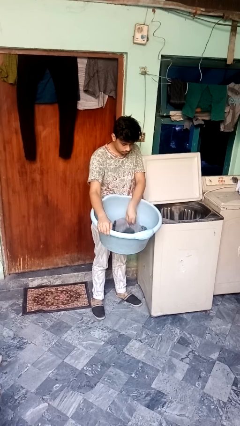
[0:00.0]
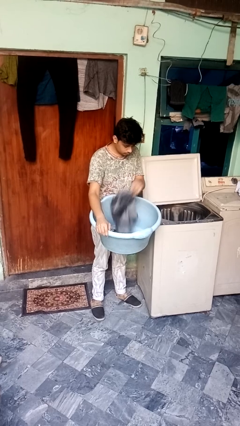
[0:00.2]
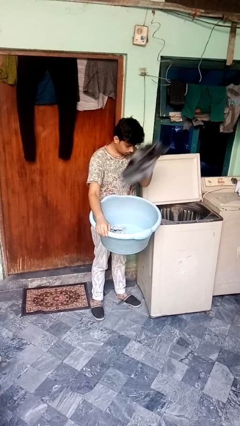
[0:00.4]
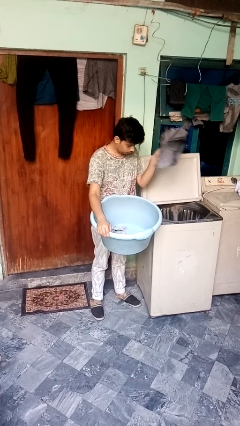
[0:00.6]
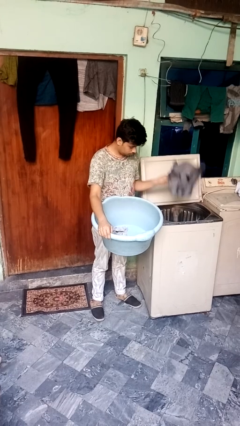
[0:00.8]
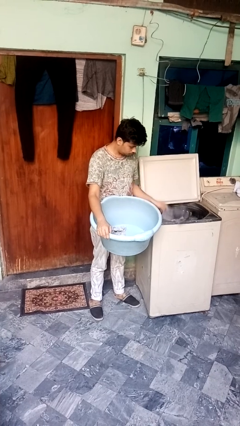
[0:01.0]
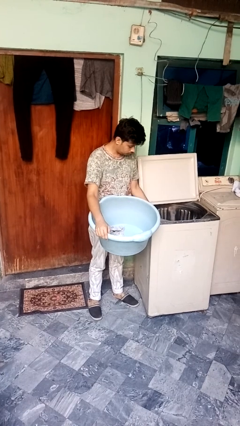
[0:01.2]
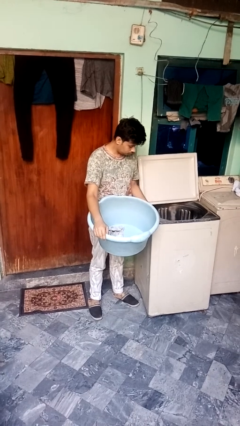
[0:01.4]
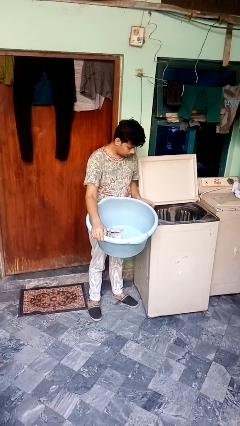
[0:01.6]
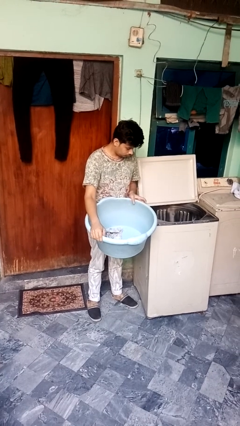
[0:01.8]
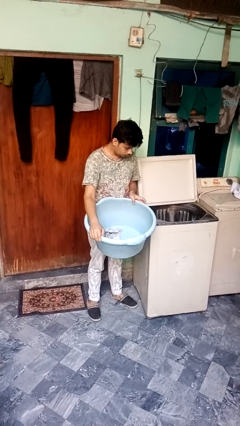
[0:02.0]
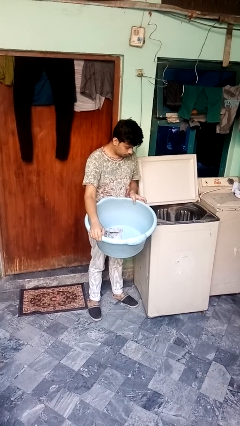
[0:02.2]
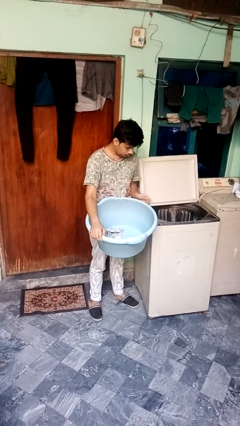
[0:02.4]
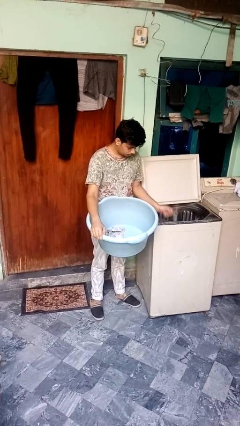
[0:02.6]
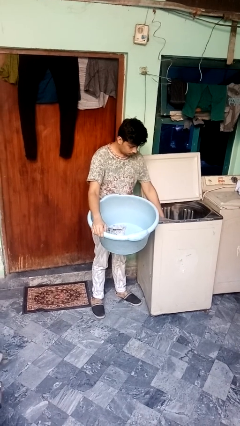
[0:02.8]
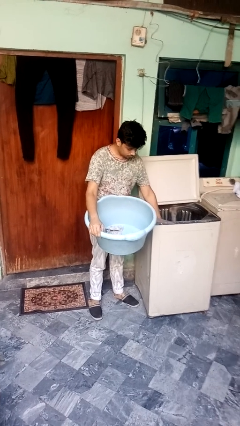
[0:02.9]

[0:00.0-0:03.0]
person unloads clotheswasher

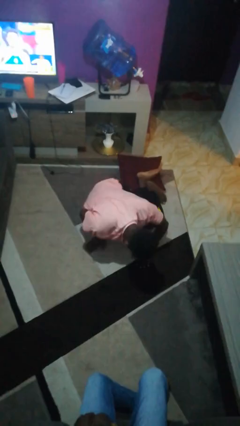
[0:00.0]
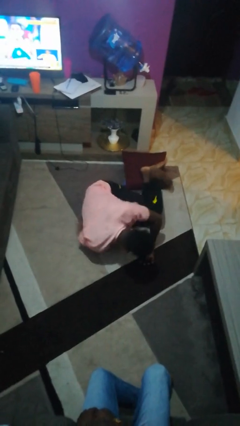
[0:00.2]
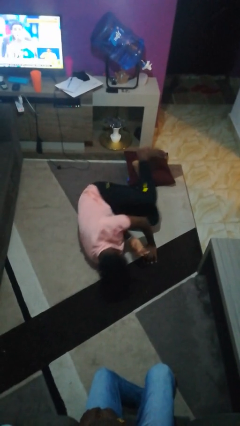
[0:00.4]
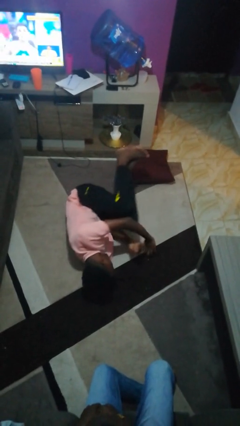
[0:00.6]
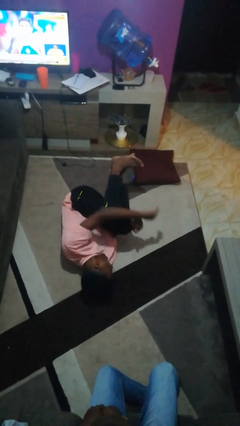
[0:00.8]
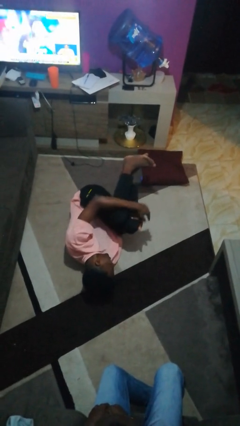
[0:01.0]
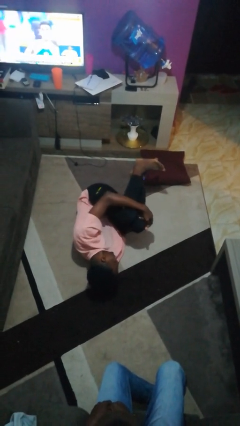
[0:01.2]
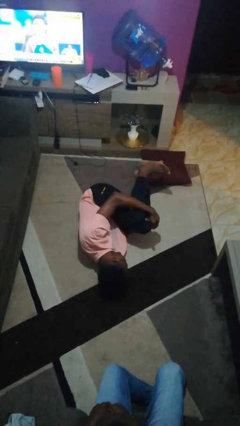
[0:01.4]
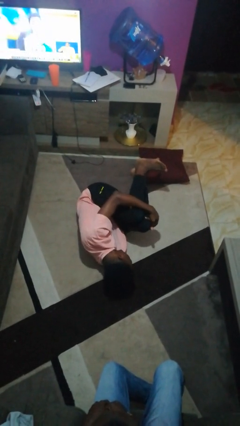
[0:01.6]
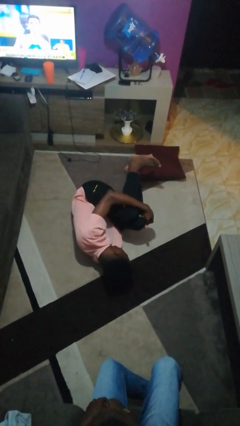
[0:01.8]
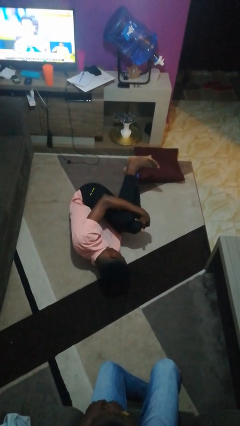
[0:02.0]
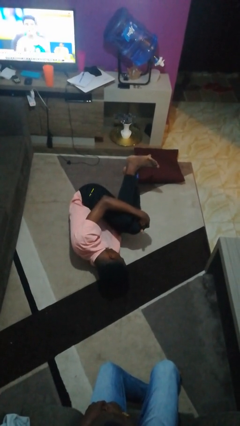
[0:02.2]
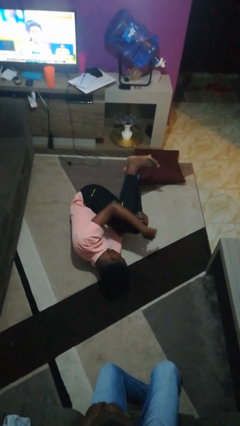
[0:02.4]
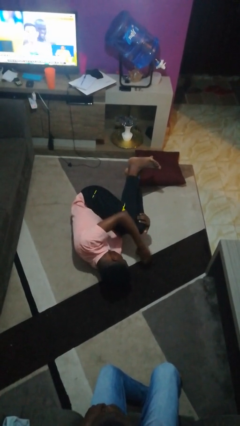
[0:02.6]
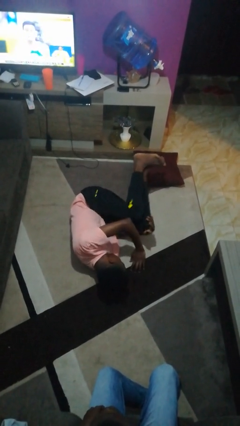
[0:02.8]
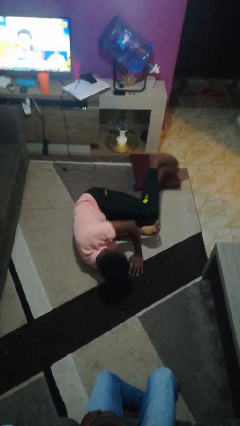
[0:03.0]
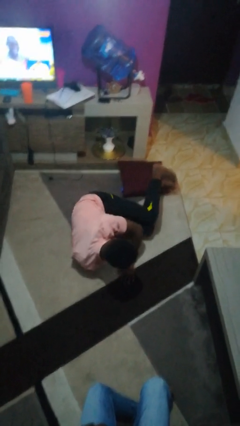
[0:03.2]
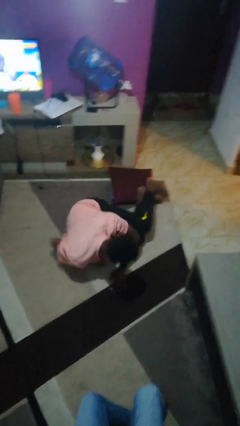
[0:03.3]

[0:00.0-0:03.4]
person lies down on floor

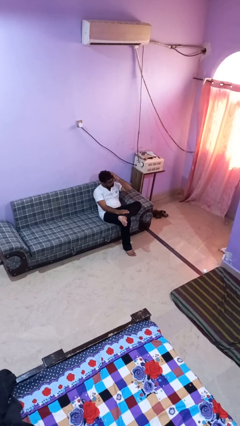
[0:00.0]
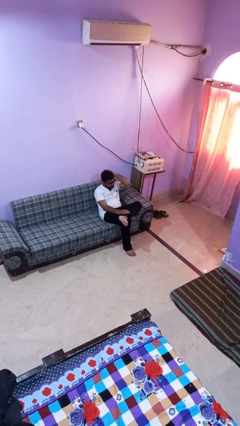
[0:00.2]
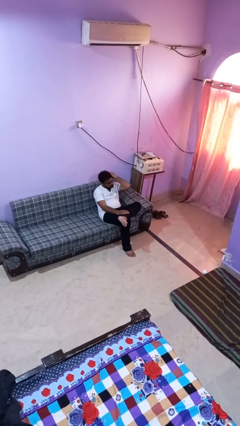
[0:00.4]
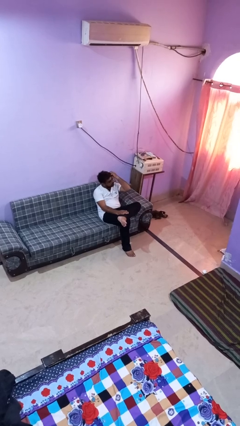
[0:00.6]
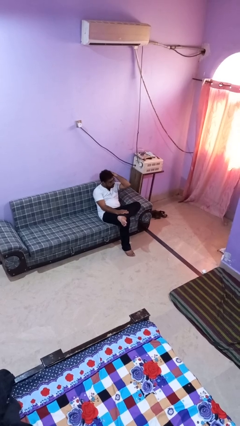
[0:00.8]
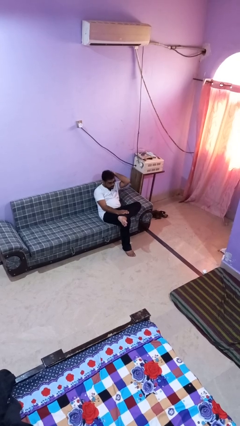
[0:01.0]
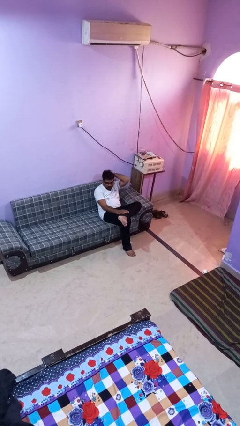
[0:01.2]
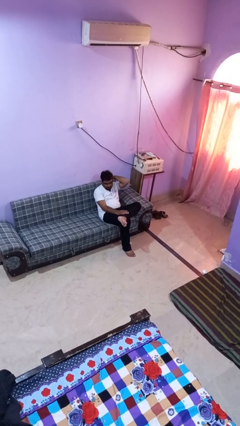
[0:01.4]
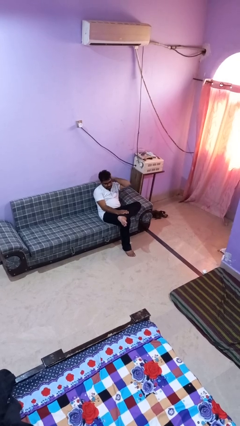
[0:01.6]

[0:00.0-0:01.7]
person strokes hair

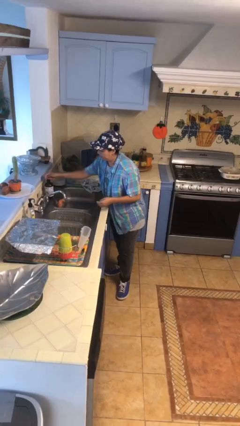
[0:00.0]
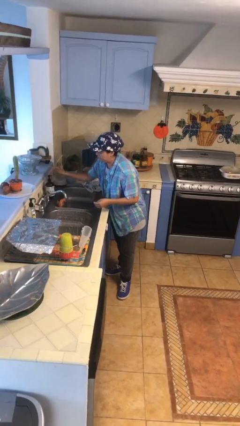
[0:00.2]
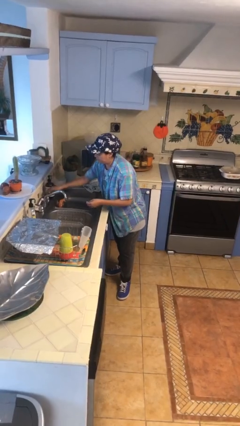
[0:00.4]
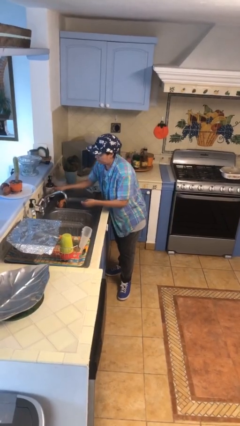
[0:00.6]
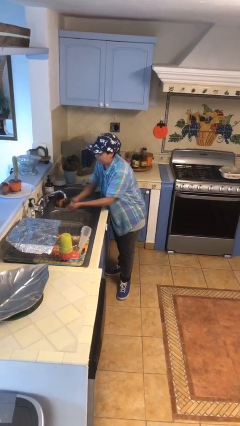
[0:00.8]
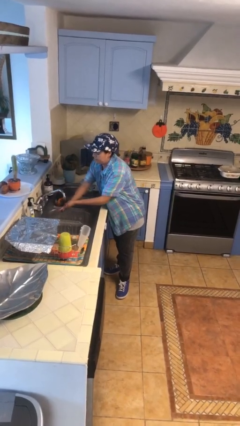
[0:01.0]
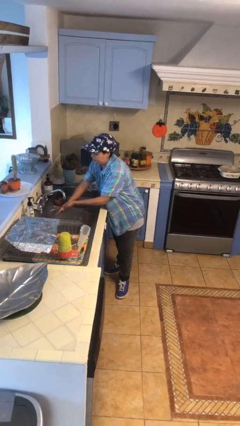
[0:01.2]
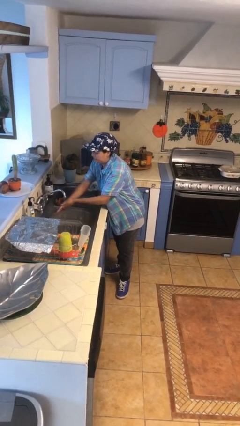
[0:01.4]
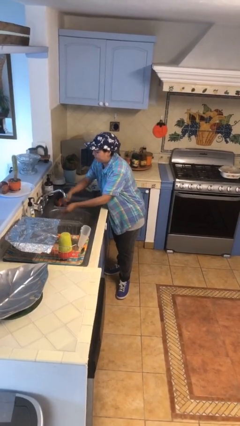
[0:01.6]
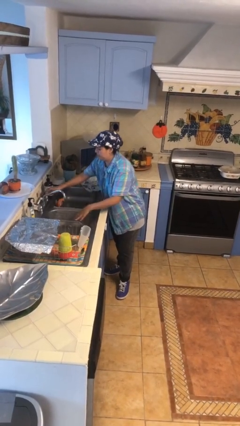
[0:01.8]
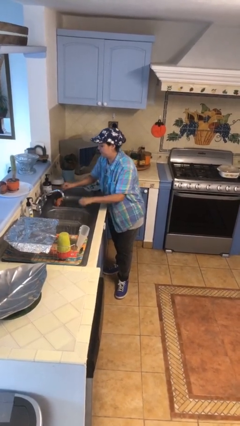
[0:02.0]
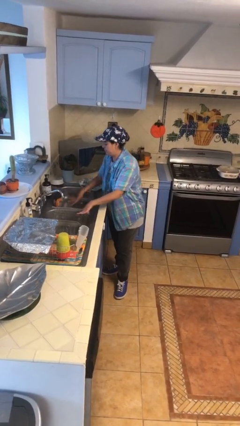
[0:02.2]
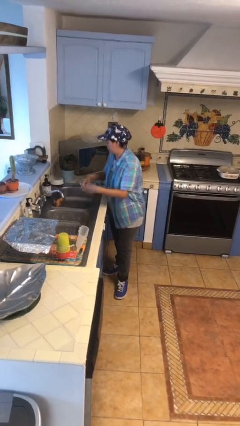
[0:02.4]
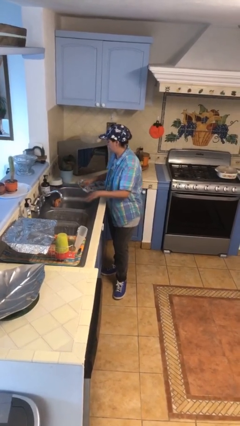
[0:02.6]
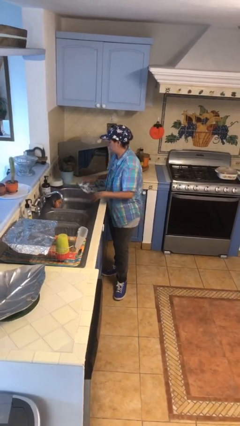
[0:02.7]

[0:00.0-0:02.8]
person washes hands

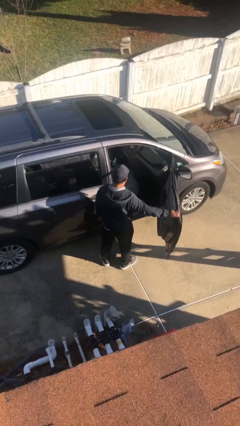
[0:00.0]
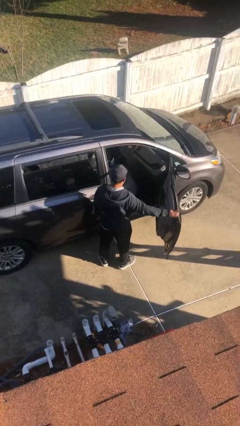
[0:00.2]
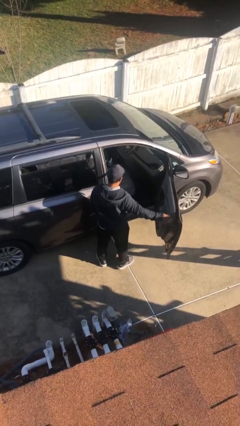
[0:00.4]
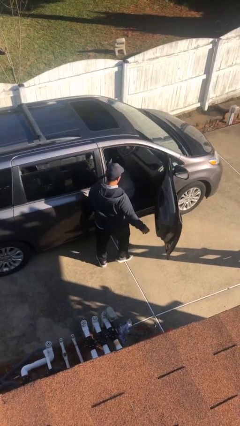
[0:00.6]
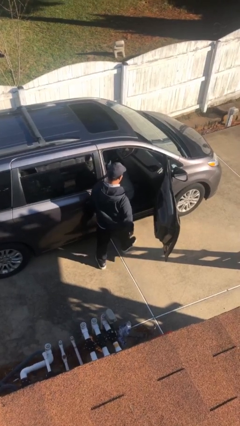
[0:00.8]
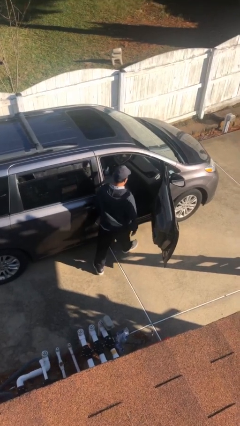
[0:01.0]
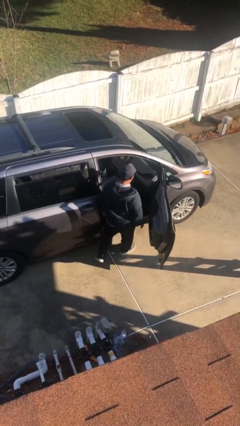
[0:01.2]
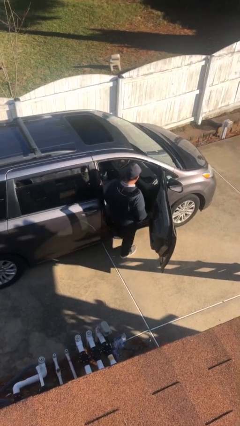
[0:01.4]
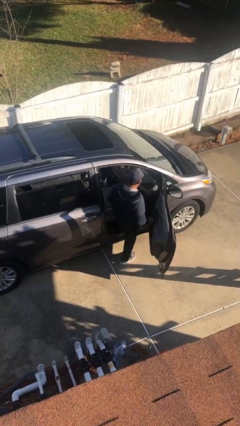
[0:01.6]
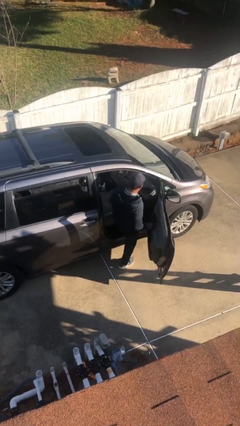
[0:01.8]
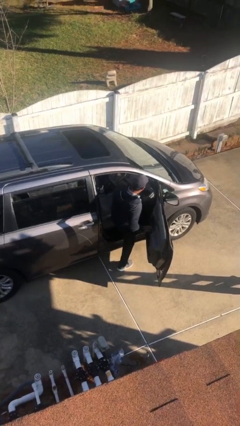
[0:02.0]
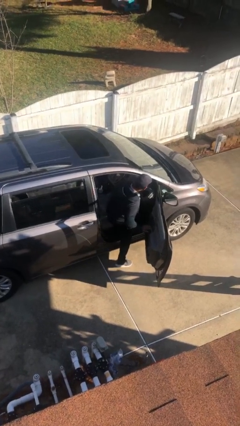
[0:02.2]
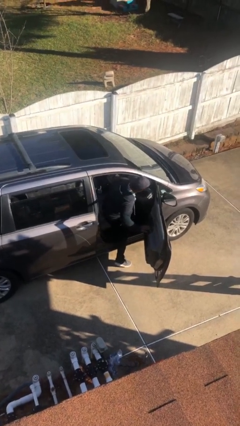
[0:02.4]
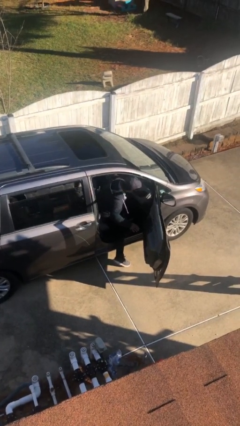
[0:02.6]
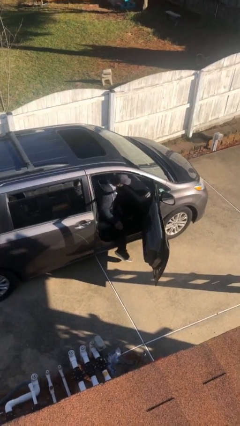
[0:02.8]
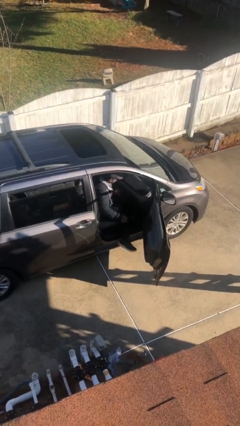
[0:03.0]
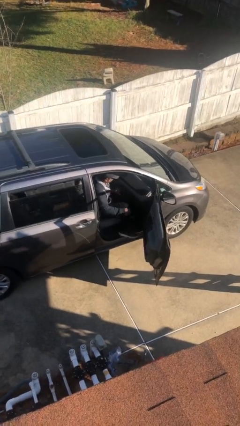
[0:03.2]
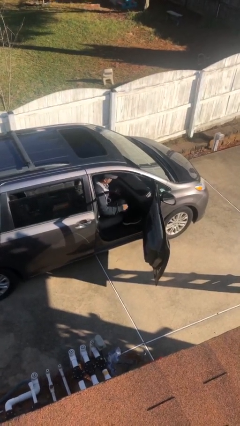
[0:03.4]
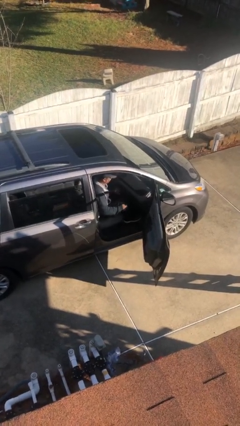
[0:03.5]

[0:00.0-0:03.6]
person enters car

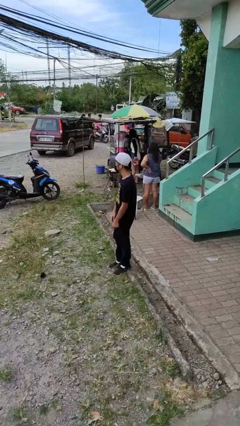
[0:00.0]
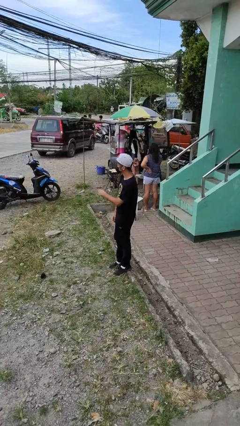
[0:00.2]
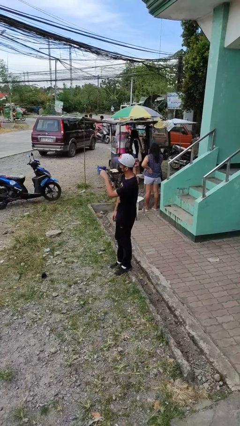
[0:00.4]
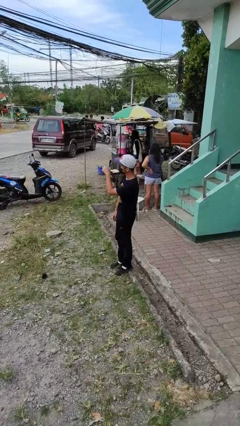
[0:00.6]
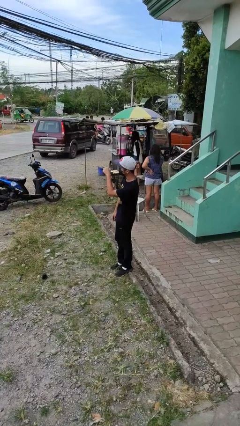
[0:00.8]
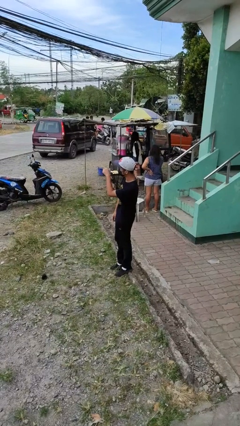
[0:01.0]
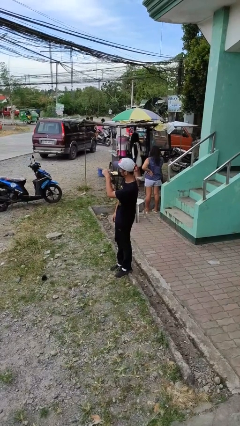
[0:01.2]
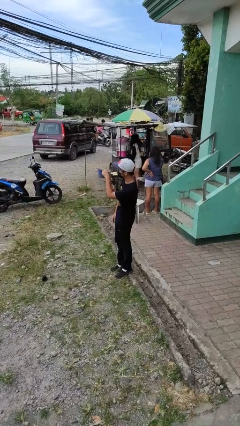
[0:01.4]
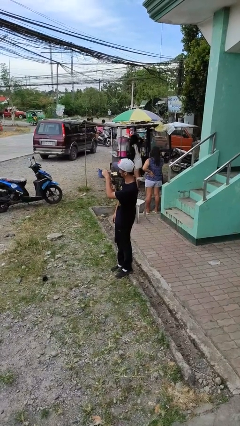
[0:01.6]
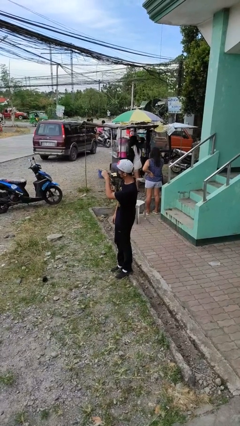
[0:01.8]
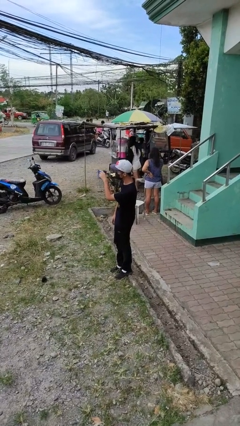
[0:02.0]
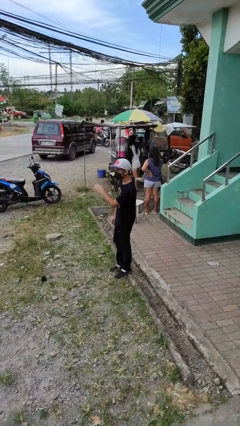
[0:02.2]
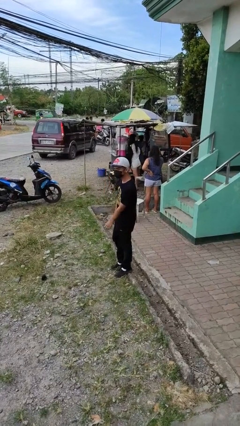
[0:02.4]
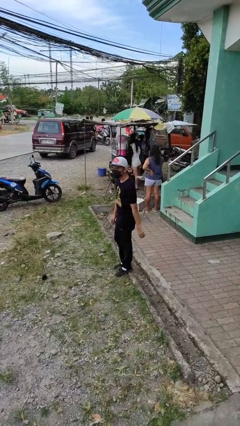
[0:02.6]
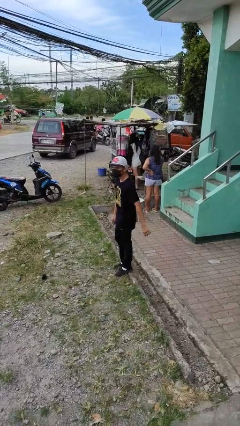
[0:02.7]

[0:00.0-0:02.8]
person points at person

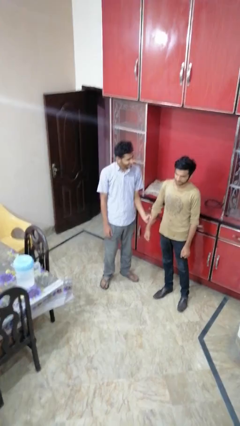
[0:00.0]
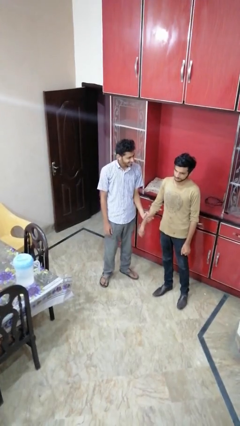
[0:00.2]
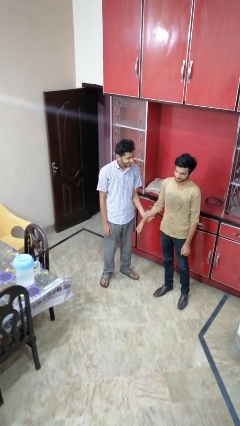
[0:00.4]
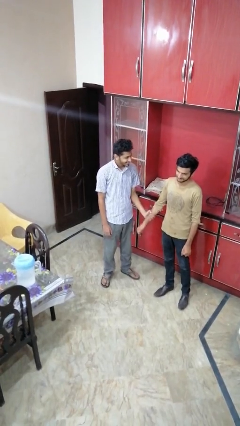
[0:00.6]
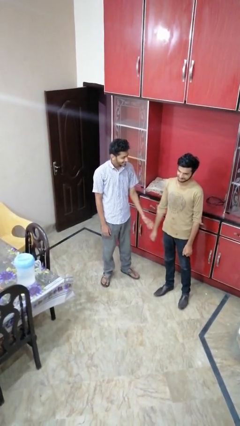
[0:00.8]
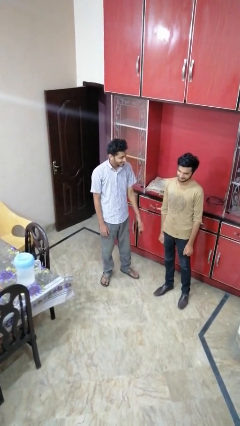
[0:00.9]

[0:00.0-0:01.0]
person grabs person by forearm
